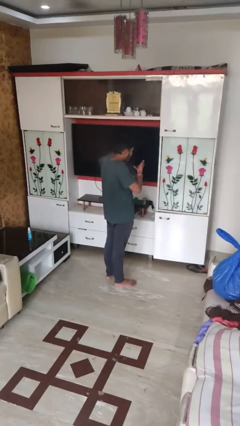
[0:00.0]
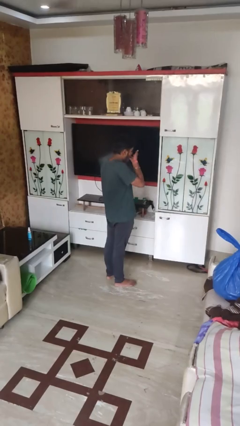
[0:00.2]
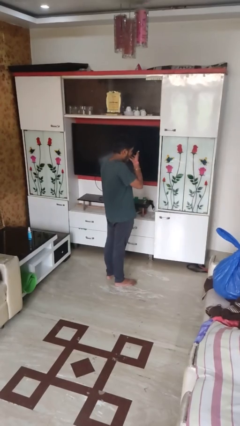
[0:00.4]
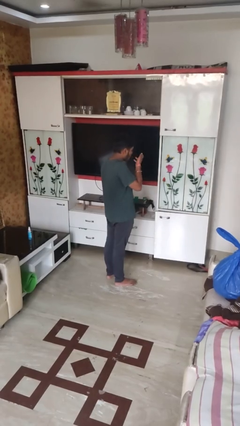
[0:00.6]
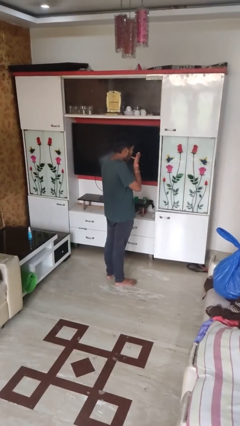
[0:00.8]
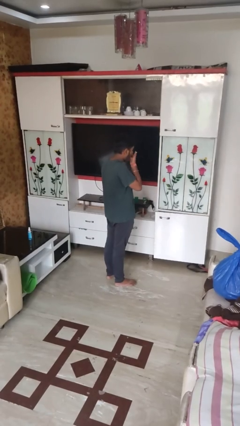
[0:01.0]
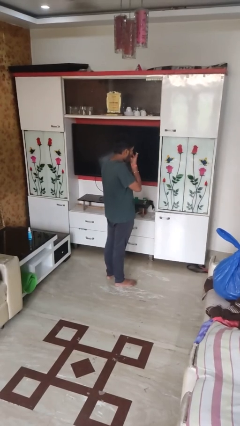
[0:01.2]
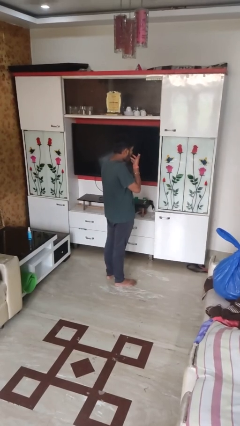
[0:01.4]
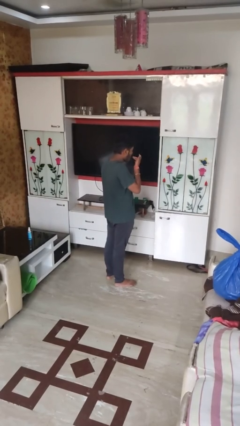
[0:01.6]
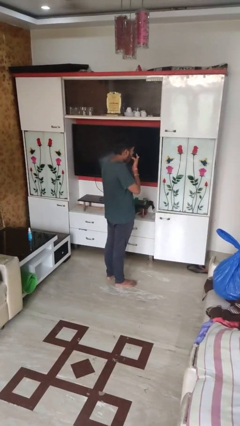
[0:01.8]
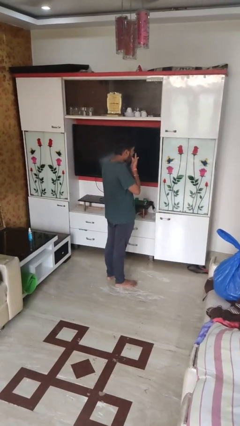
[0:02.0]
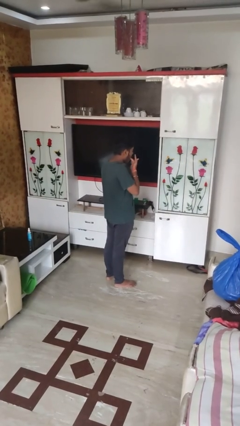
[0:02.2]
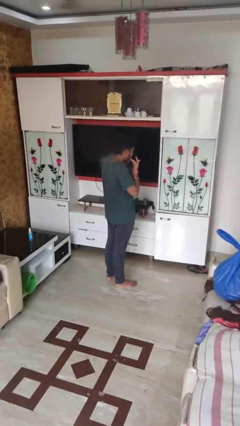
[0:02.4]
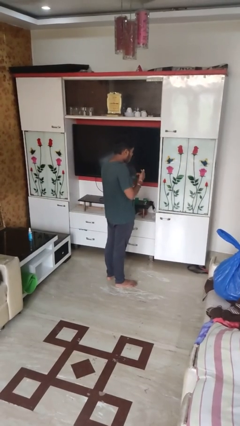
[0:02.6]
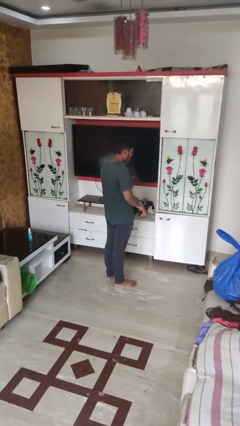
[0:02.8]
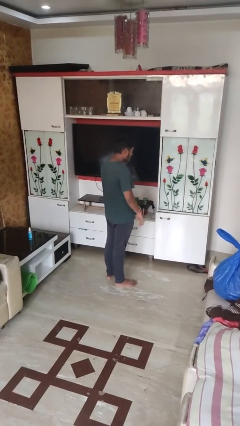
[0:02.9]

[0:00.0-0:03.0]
person licks fingers

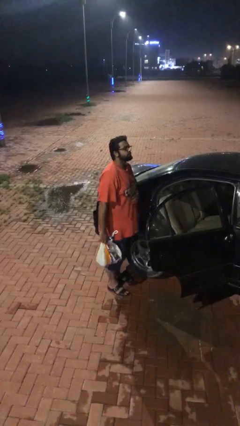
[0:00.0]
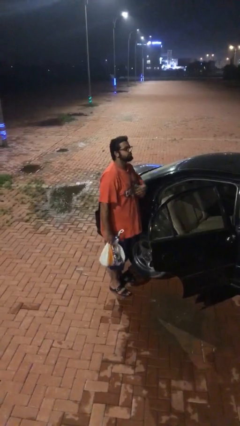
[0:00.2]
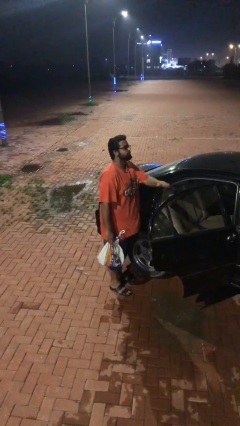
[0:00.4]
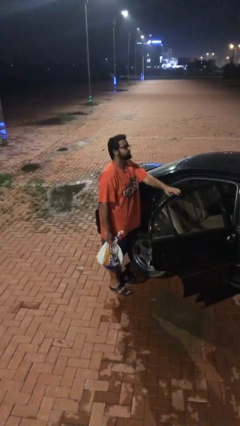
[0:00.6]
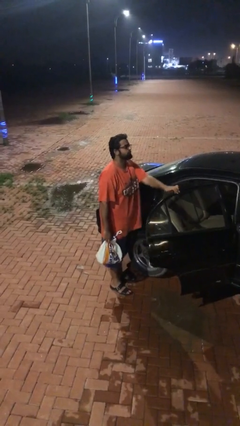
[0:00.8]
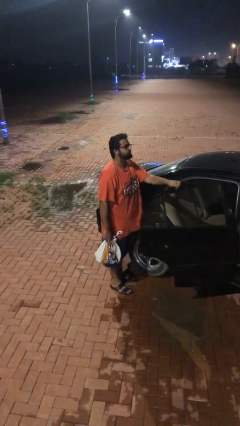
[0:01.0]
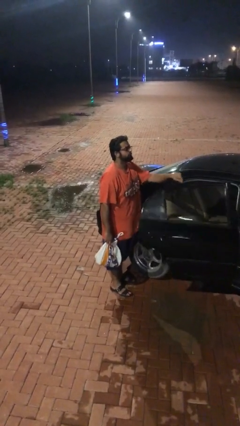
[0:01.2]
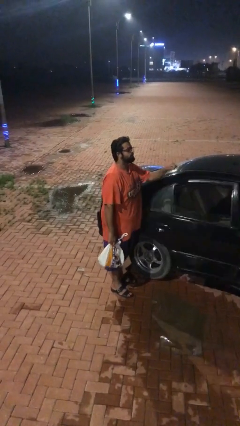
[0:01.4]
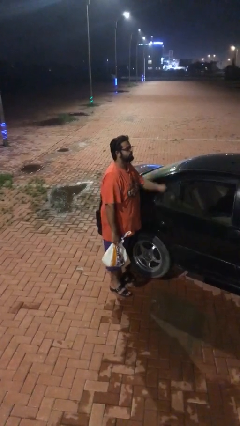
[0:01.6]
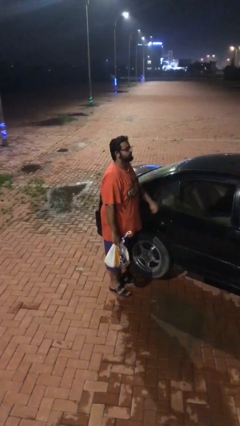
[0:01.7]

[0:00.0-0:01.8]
person closes car door

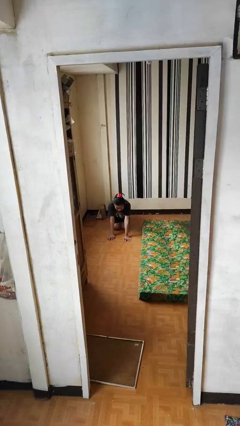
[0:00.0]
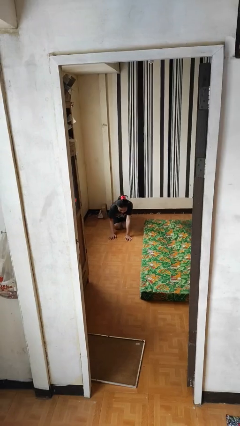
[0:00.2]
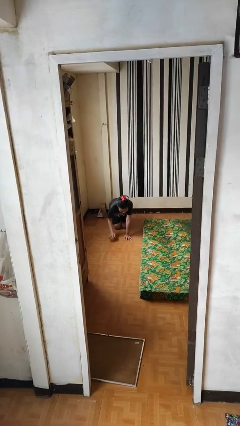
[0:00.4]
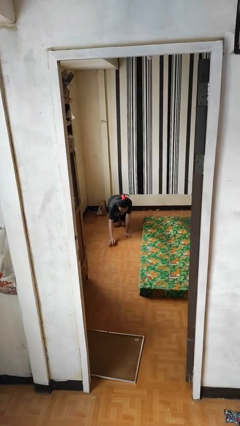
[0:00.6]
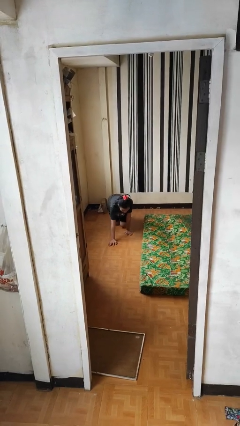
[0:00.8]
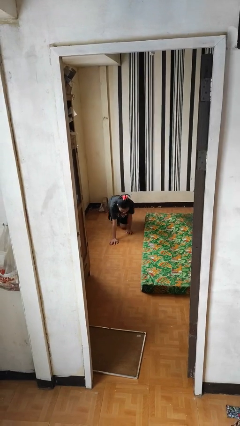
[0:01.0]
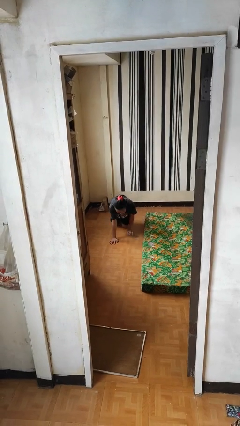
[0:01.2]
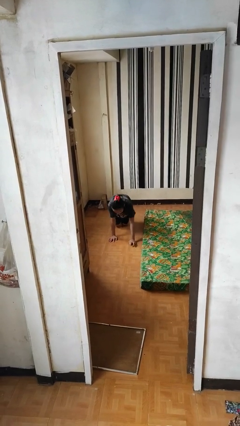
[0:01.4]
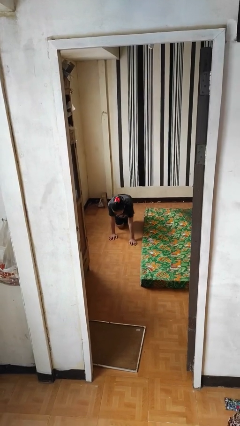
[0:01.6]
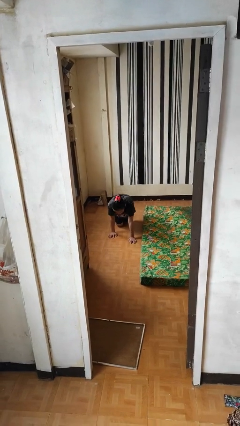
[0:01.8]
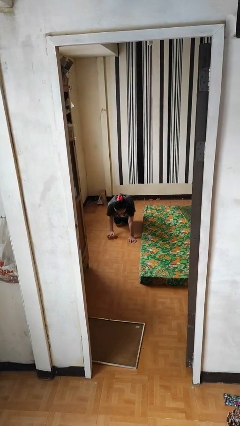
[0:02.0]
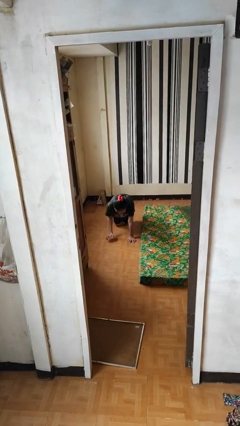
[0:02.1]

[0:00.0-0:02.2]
person crawls

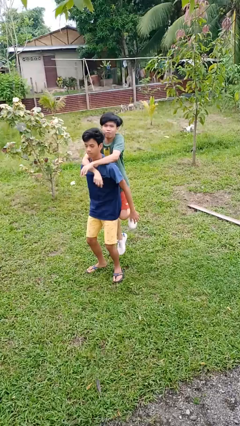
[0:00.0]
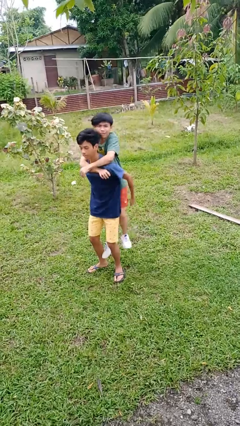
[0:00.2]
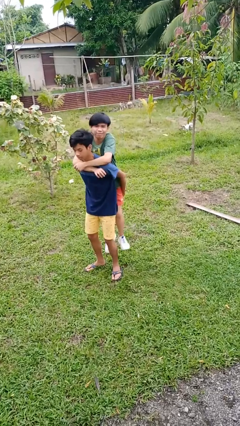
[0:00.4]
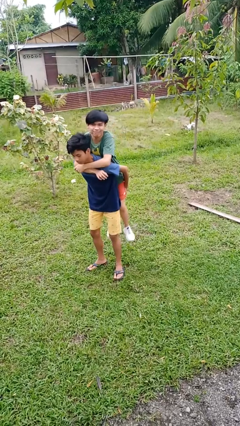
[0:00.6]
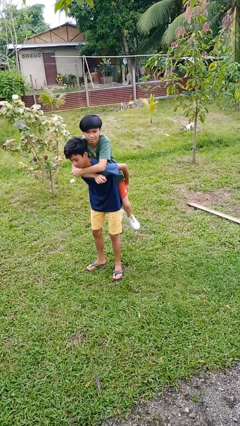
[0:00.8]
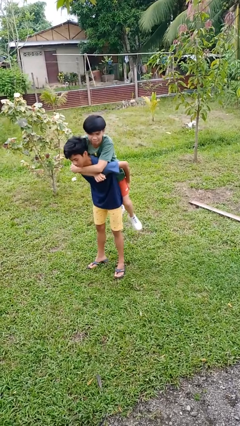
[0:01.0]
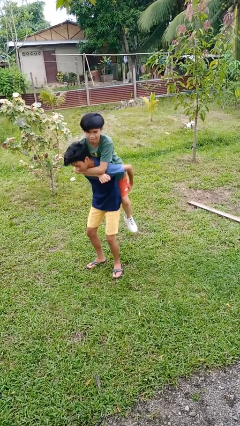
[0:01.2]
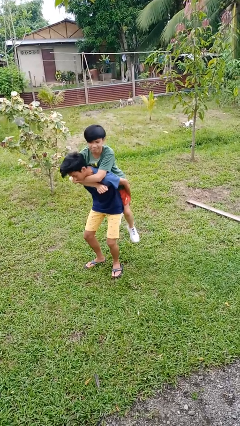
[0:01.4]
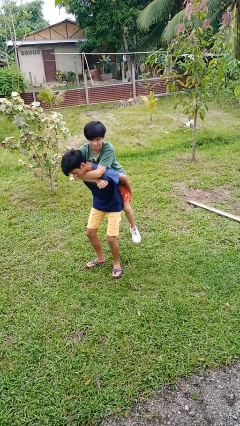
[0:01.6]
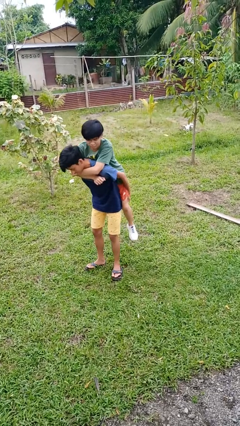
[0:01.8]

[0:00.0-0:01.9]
person carries person over shoulder

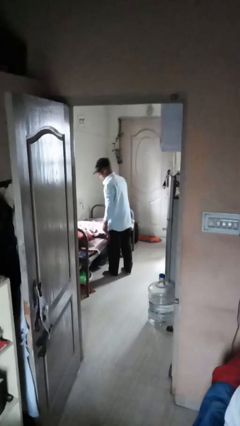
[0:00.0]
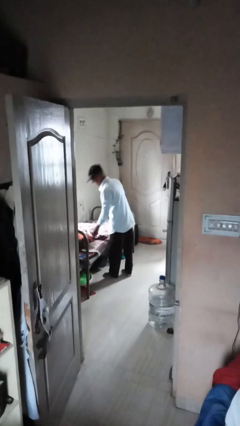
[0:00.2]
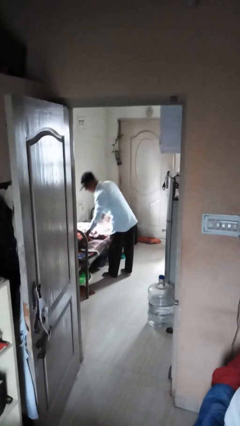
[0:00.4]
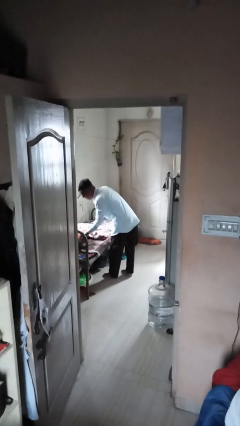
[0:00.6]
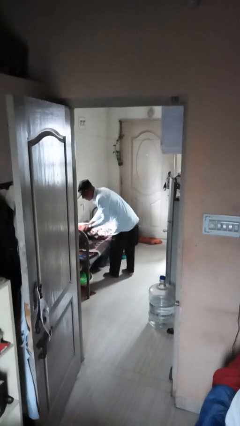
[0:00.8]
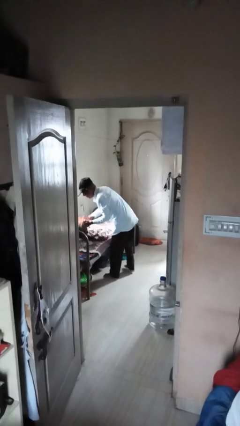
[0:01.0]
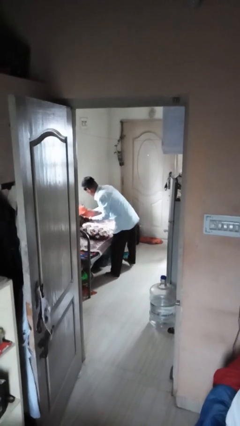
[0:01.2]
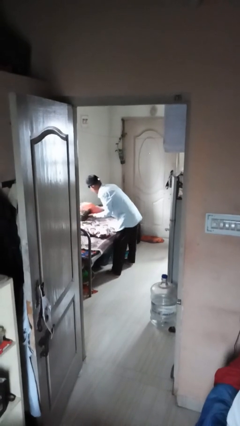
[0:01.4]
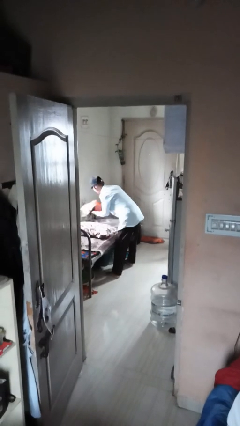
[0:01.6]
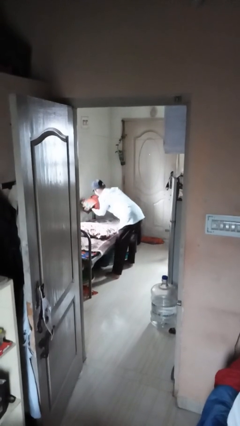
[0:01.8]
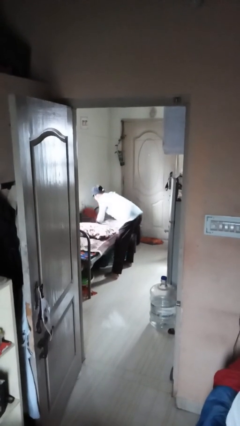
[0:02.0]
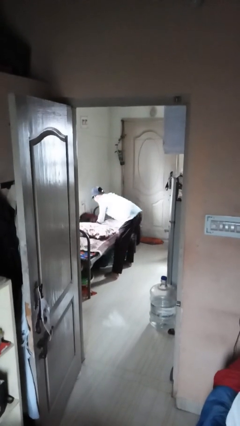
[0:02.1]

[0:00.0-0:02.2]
person makes bed

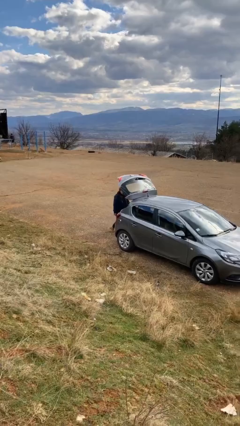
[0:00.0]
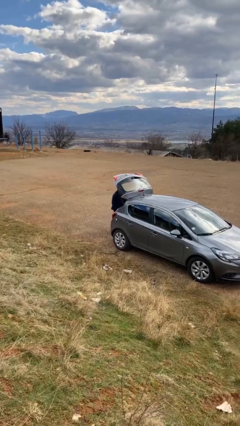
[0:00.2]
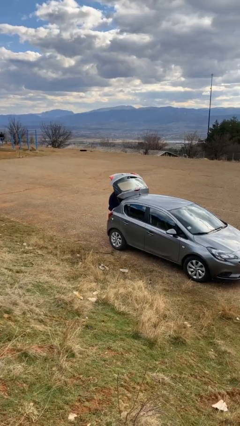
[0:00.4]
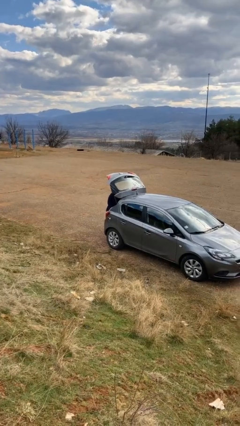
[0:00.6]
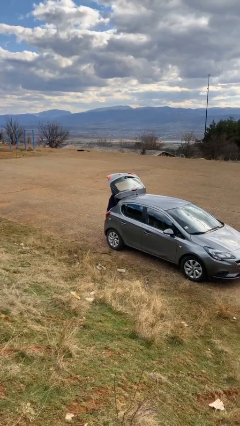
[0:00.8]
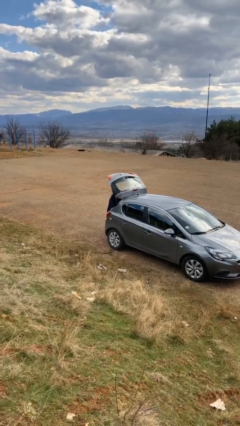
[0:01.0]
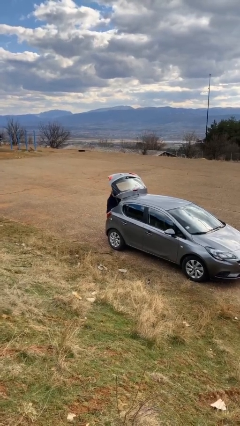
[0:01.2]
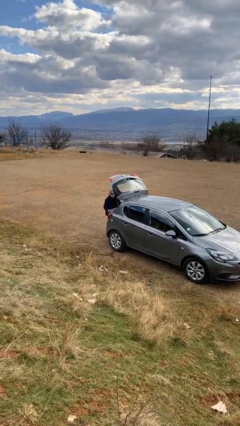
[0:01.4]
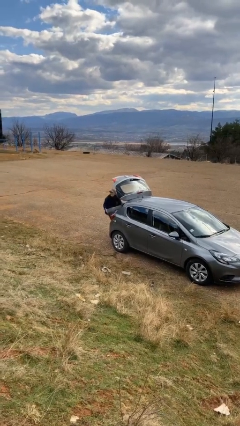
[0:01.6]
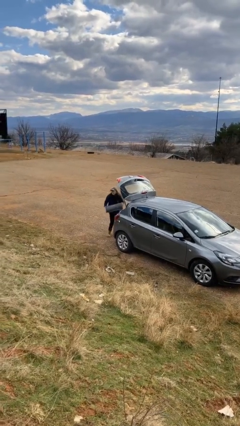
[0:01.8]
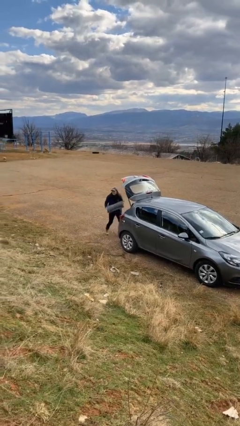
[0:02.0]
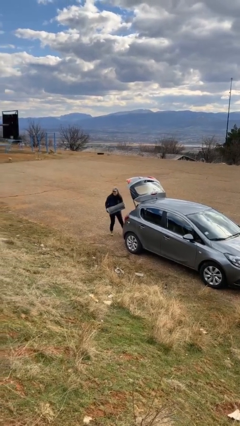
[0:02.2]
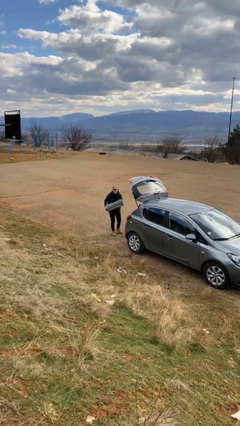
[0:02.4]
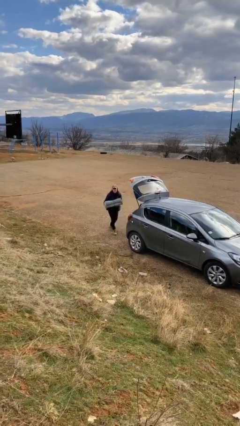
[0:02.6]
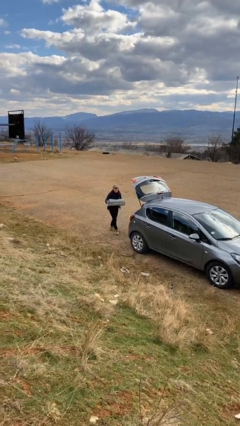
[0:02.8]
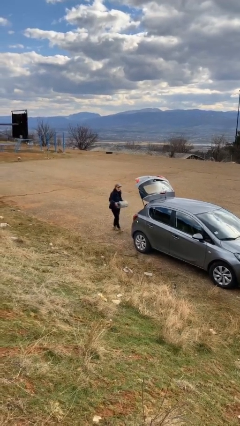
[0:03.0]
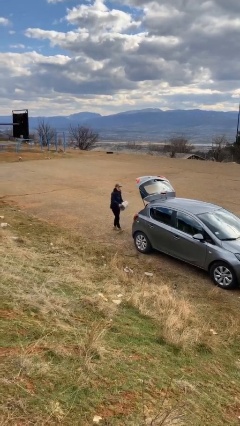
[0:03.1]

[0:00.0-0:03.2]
person unloads car

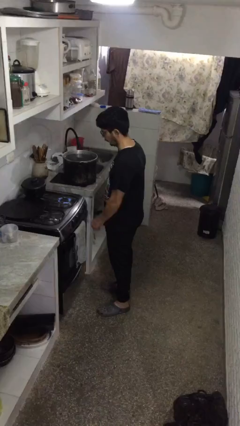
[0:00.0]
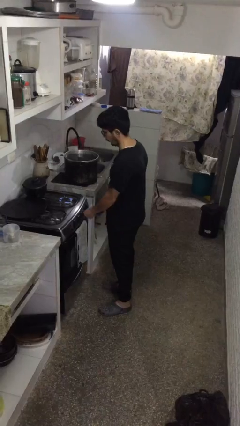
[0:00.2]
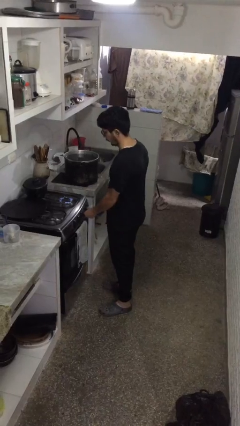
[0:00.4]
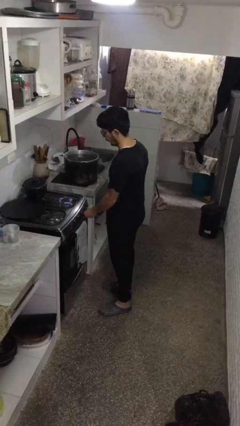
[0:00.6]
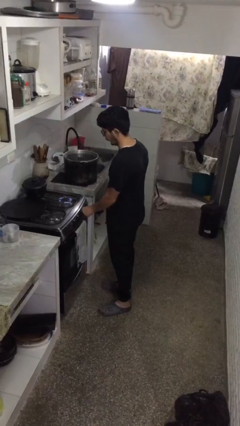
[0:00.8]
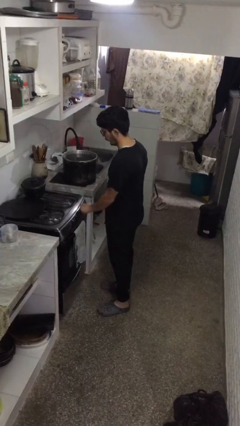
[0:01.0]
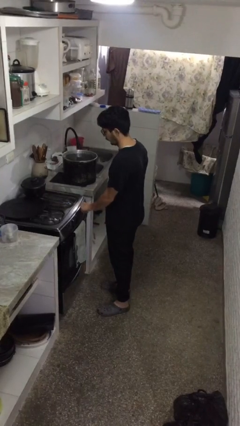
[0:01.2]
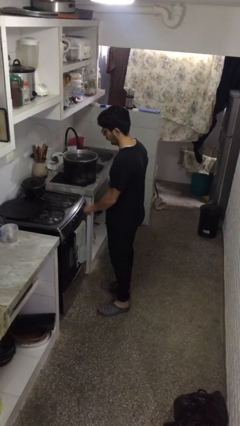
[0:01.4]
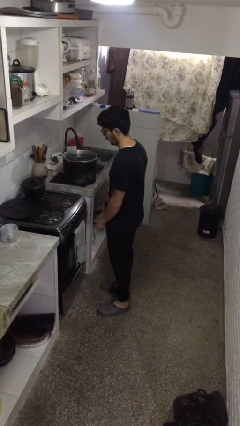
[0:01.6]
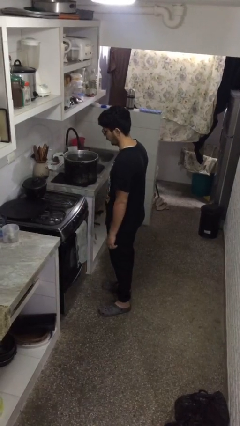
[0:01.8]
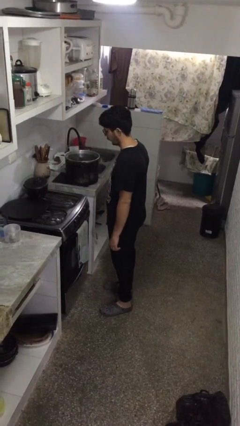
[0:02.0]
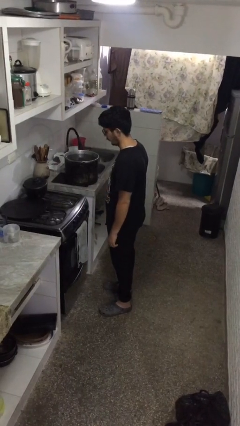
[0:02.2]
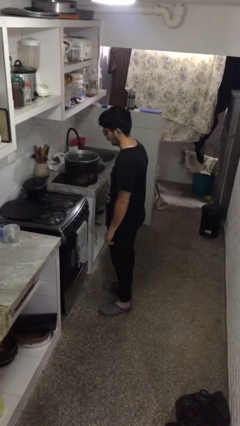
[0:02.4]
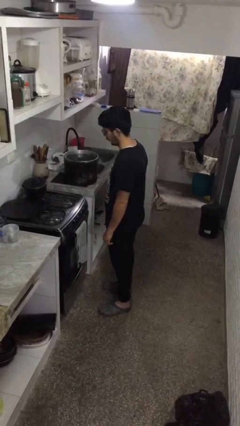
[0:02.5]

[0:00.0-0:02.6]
person turns off stovetop
